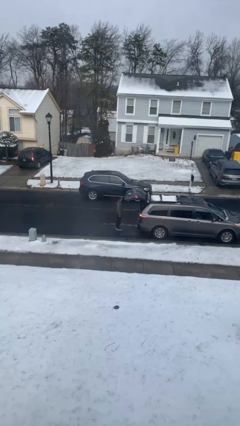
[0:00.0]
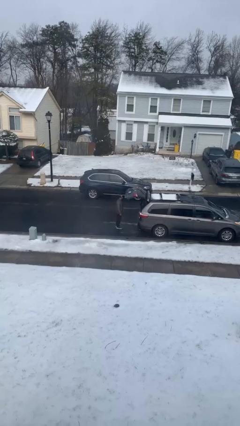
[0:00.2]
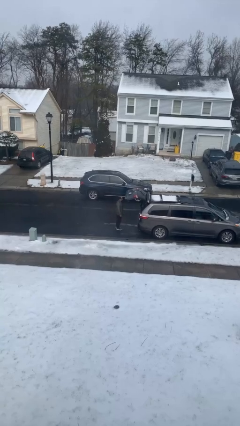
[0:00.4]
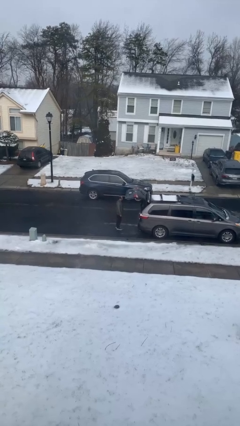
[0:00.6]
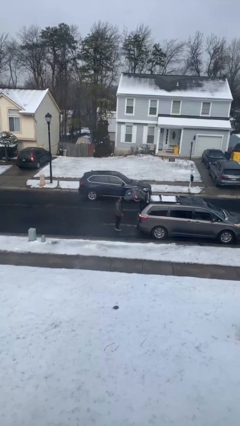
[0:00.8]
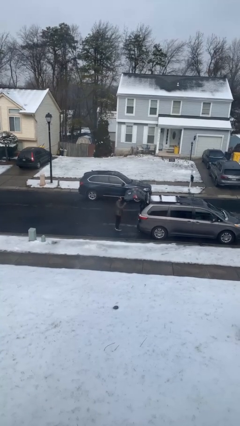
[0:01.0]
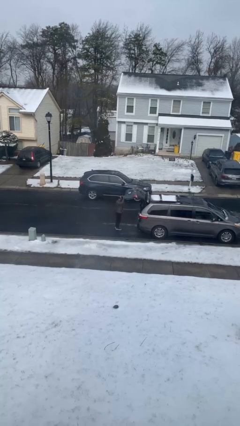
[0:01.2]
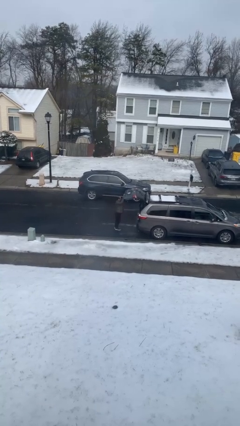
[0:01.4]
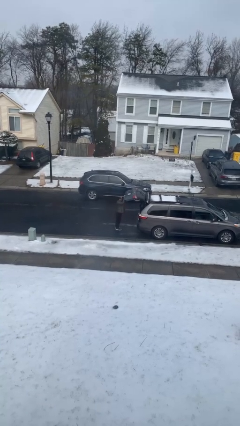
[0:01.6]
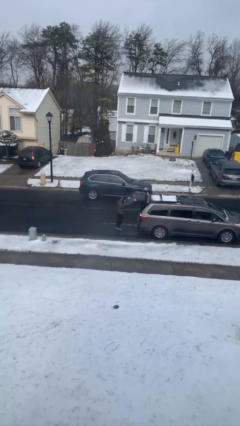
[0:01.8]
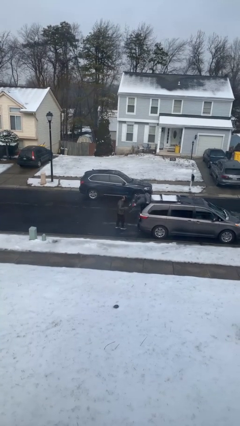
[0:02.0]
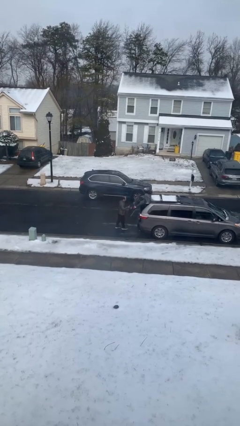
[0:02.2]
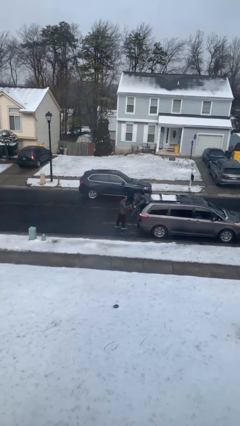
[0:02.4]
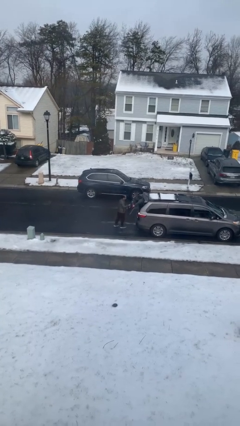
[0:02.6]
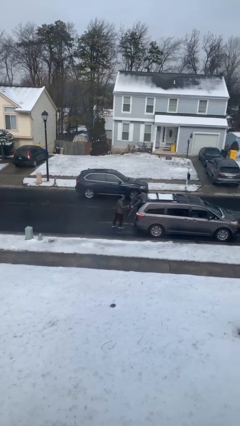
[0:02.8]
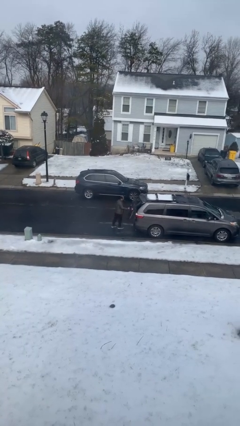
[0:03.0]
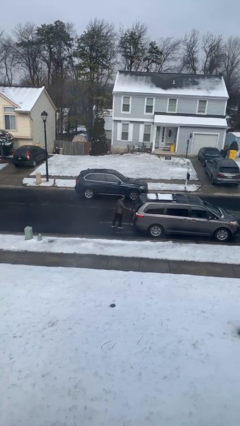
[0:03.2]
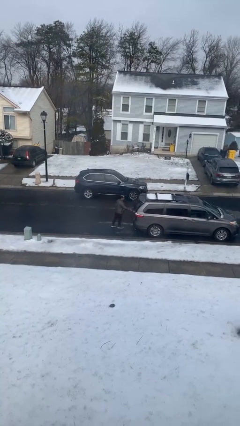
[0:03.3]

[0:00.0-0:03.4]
person closes car trunk

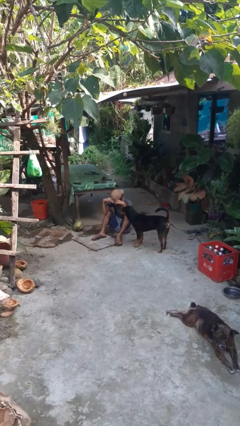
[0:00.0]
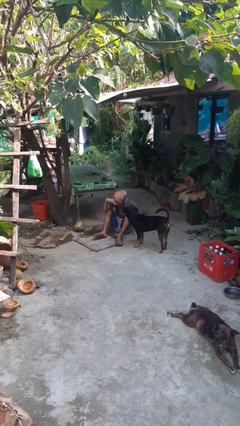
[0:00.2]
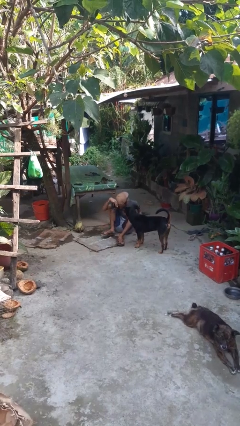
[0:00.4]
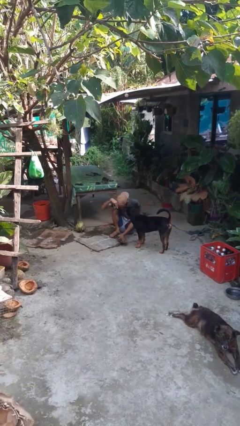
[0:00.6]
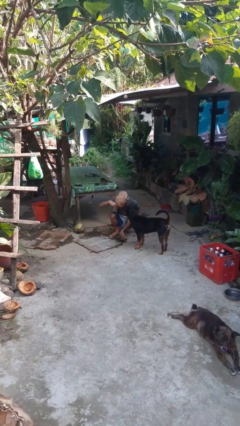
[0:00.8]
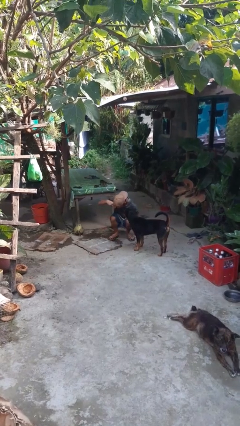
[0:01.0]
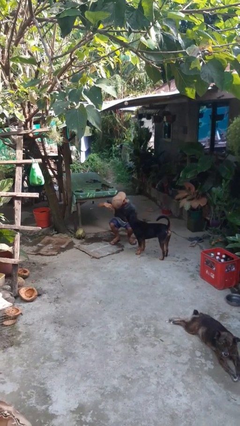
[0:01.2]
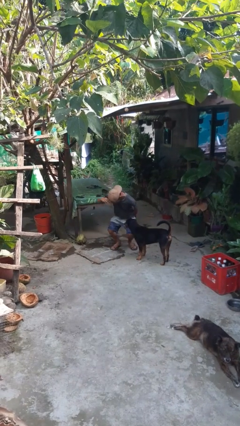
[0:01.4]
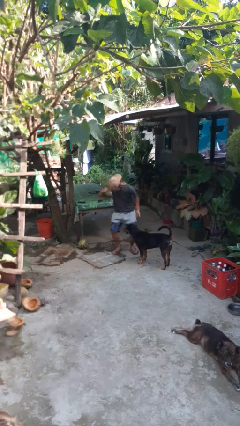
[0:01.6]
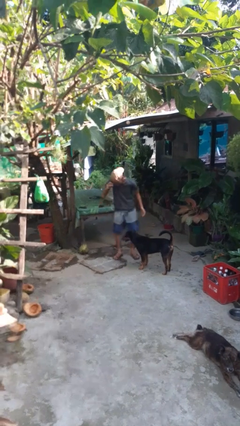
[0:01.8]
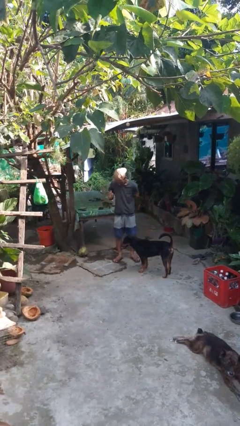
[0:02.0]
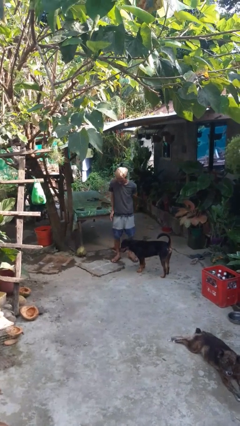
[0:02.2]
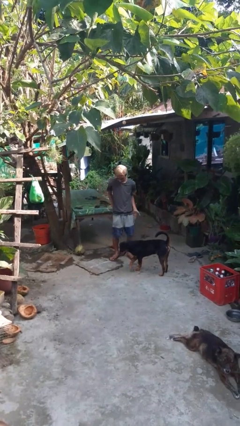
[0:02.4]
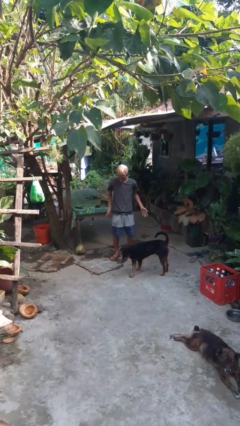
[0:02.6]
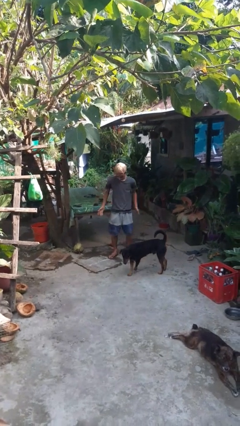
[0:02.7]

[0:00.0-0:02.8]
person stands up from floor

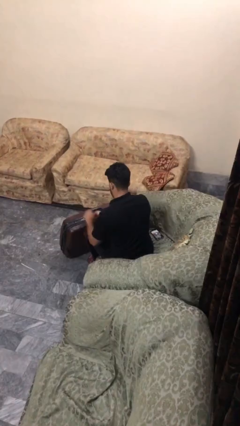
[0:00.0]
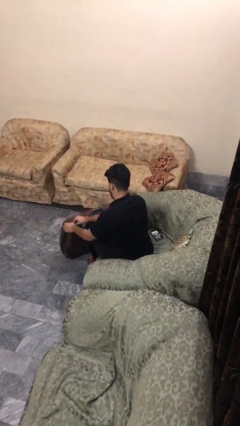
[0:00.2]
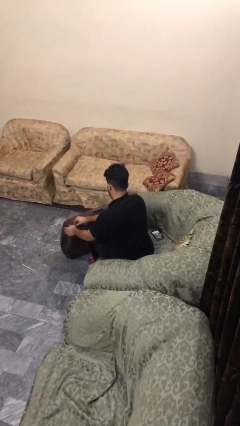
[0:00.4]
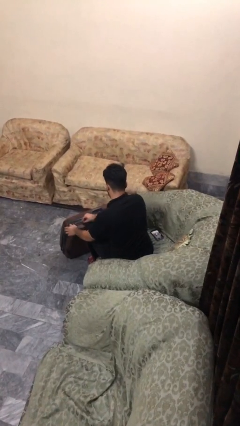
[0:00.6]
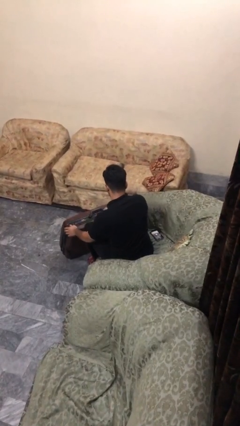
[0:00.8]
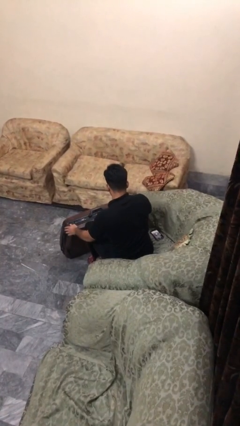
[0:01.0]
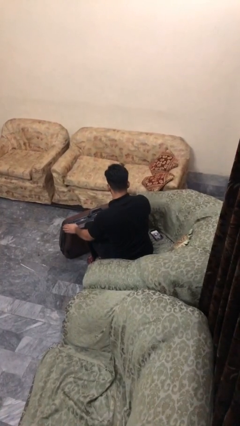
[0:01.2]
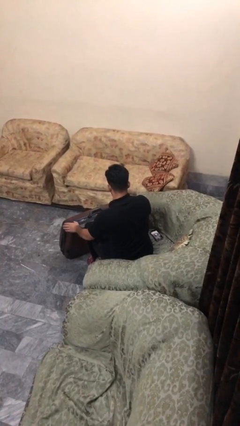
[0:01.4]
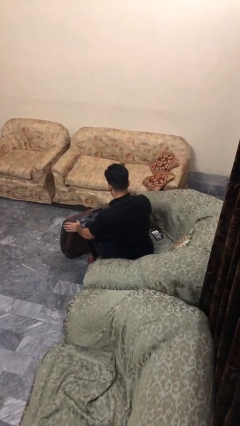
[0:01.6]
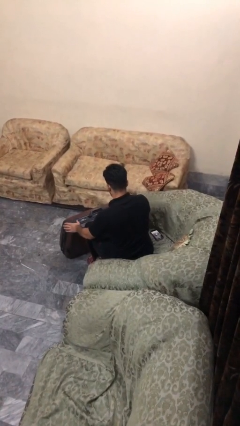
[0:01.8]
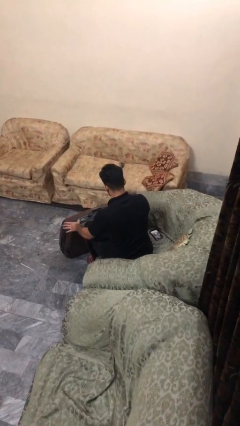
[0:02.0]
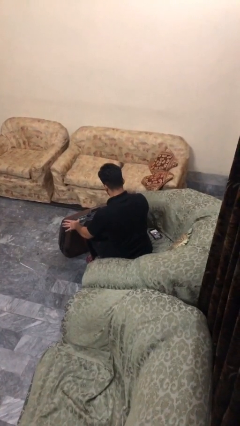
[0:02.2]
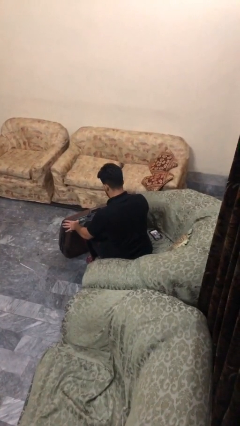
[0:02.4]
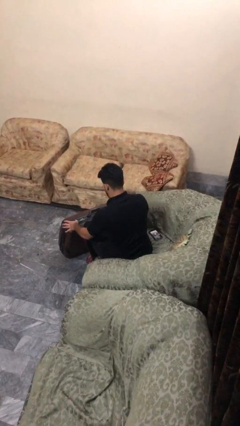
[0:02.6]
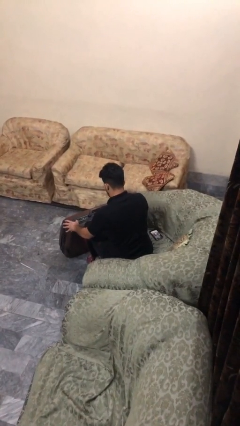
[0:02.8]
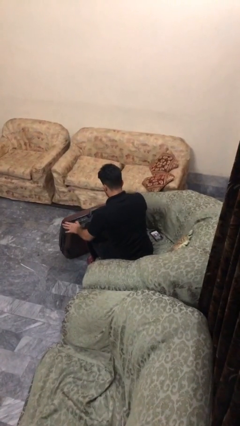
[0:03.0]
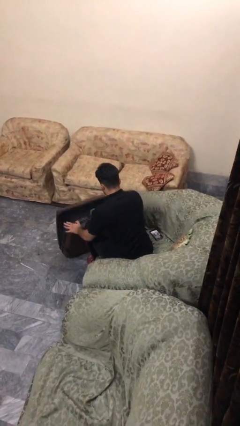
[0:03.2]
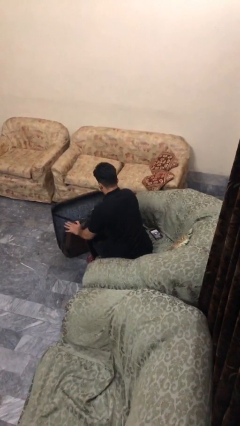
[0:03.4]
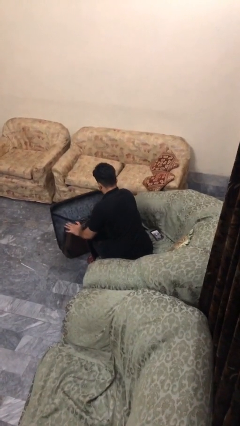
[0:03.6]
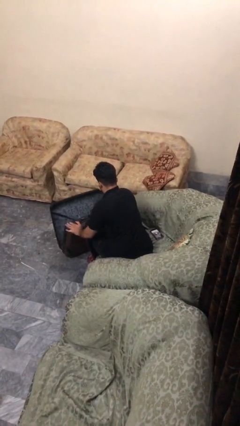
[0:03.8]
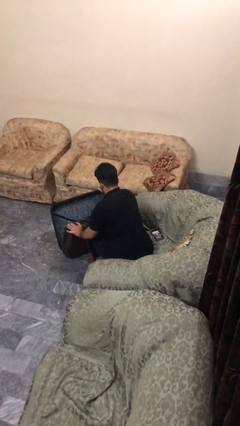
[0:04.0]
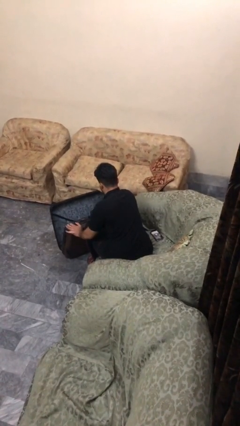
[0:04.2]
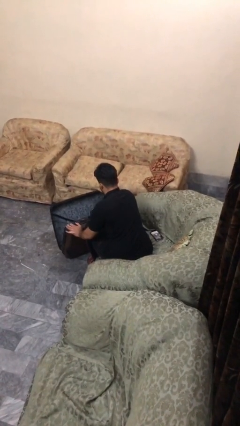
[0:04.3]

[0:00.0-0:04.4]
person opens suitcase

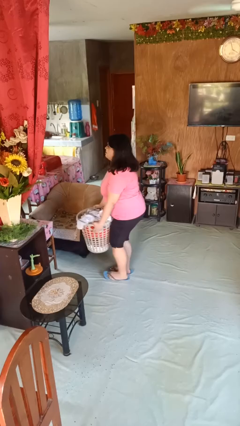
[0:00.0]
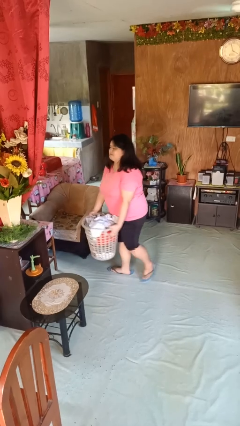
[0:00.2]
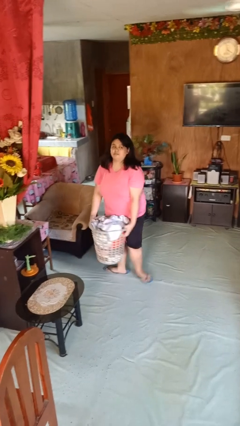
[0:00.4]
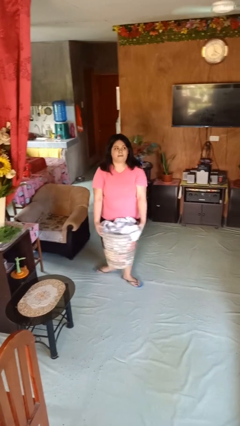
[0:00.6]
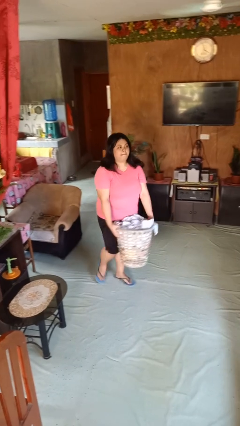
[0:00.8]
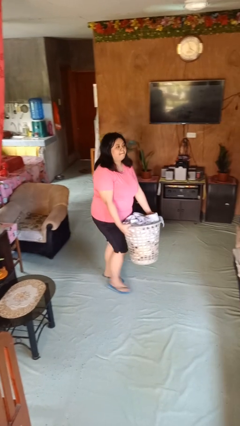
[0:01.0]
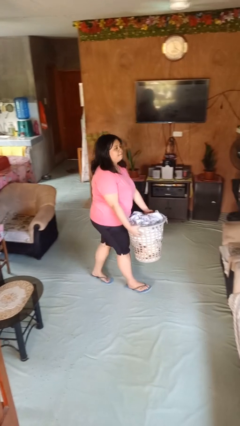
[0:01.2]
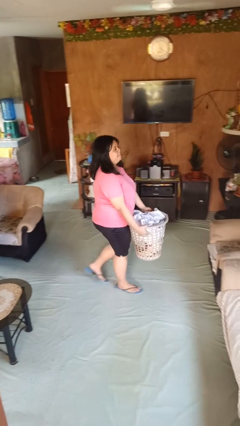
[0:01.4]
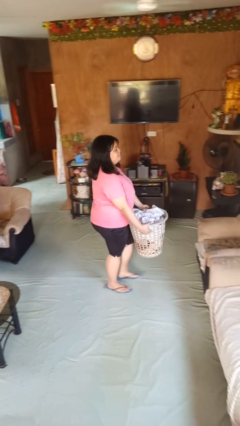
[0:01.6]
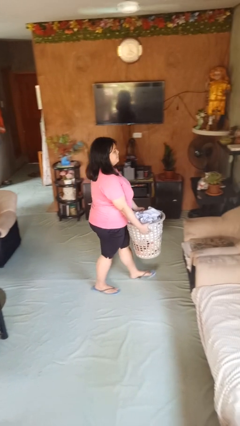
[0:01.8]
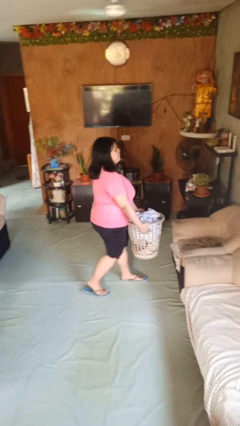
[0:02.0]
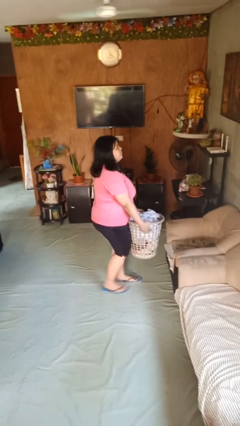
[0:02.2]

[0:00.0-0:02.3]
person carries laundry basket

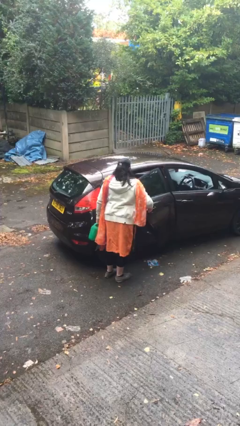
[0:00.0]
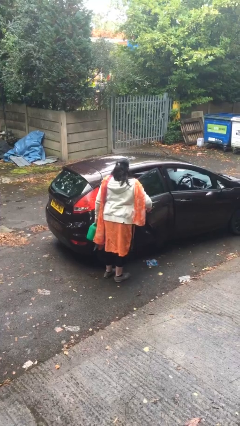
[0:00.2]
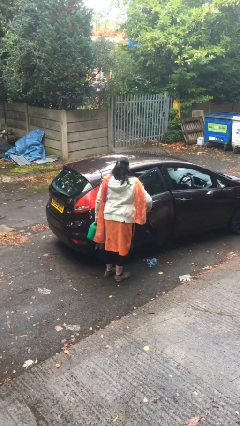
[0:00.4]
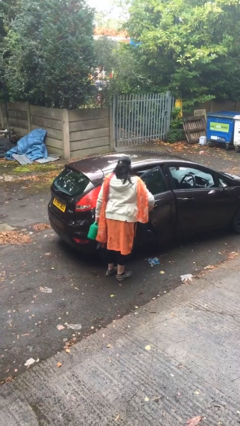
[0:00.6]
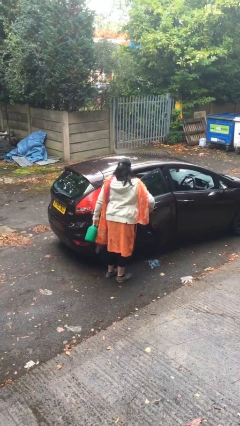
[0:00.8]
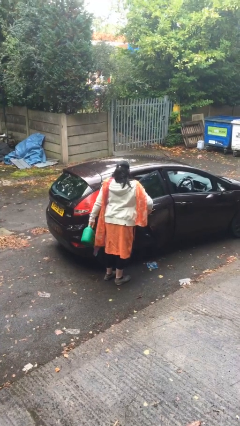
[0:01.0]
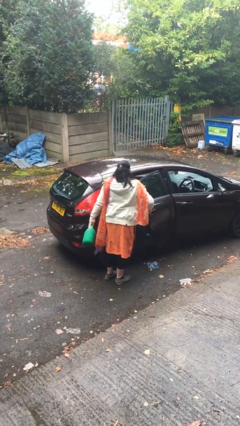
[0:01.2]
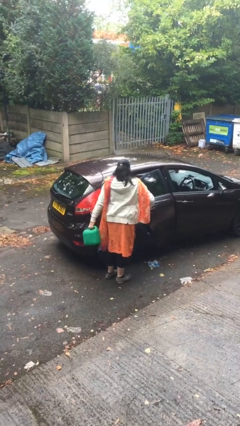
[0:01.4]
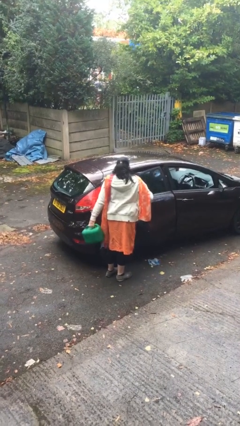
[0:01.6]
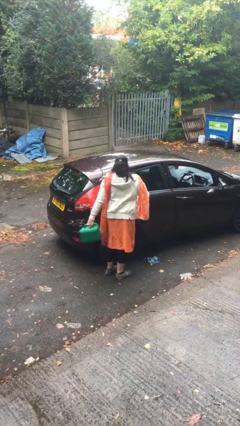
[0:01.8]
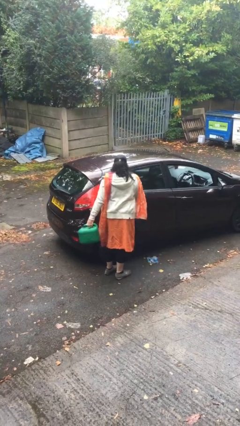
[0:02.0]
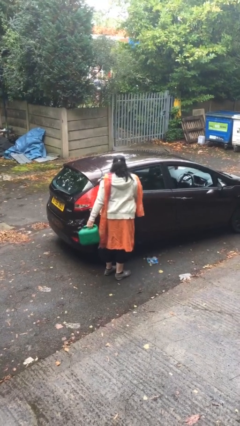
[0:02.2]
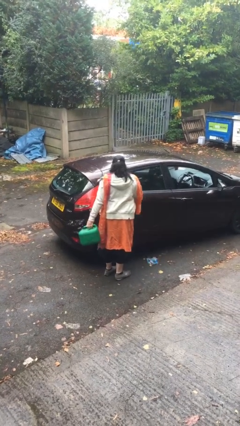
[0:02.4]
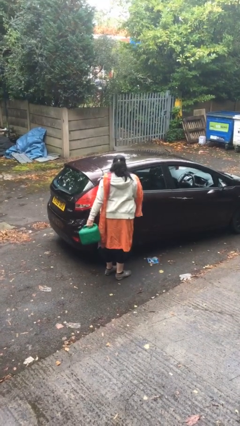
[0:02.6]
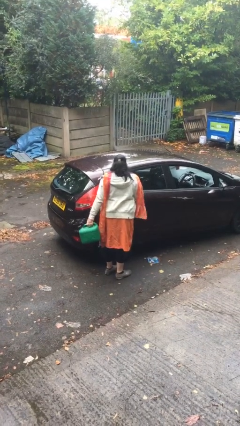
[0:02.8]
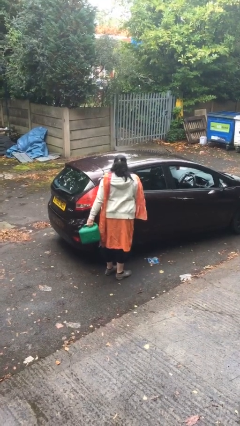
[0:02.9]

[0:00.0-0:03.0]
person closes car door

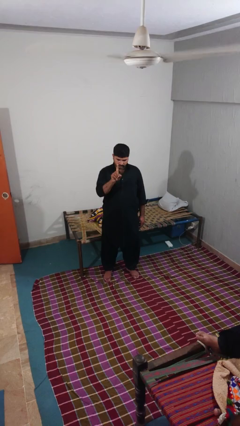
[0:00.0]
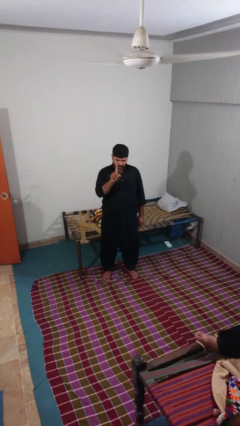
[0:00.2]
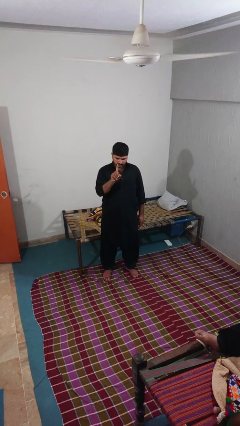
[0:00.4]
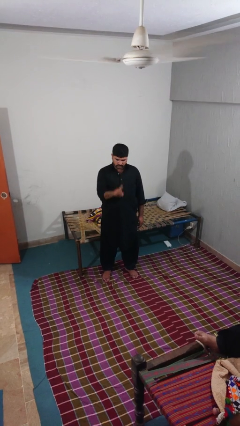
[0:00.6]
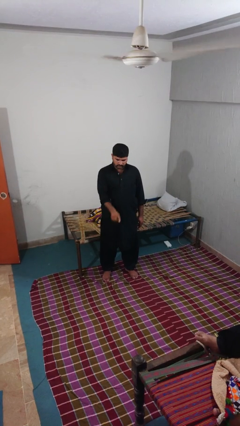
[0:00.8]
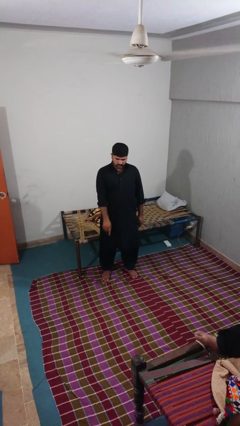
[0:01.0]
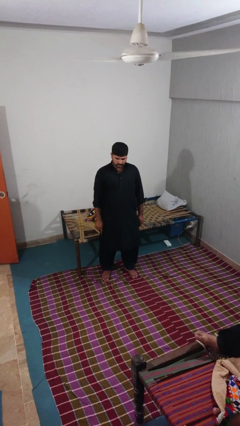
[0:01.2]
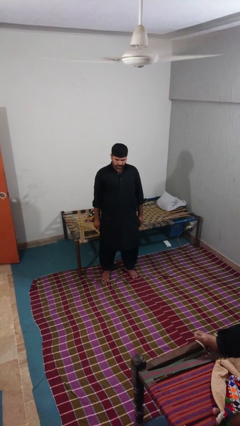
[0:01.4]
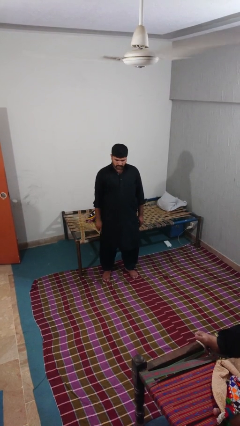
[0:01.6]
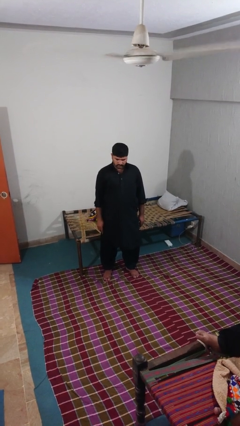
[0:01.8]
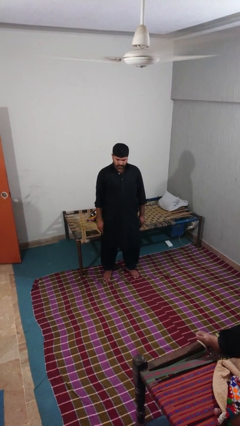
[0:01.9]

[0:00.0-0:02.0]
person gestures swipe down
